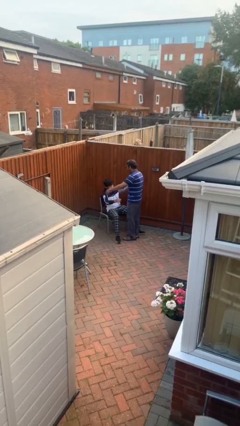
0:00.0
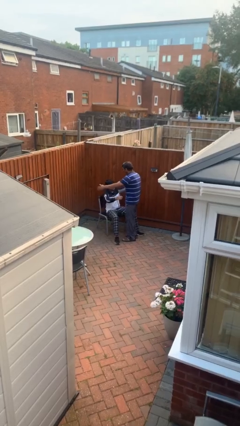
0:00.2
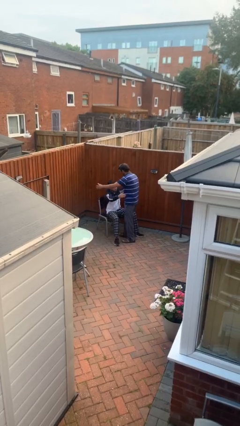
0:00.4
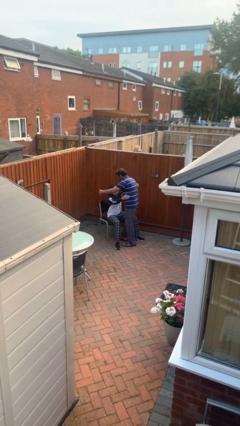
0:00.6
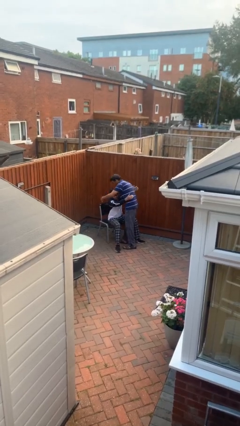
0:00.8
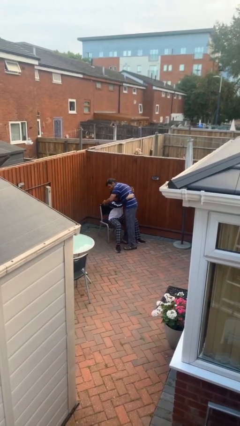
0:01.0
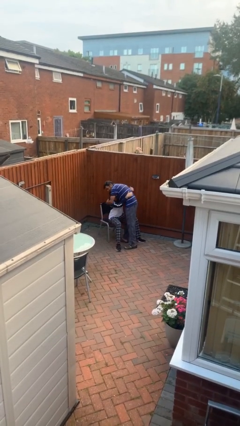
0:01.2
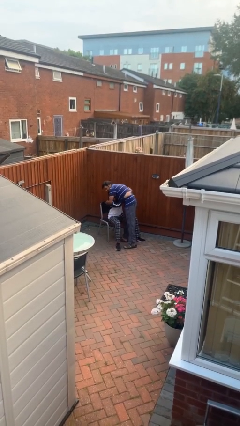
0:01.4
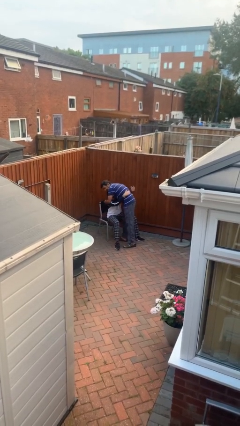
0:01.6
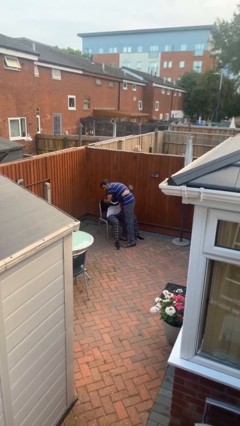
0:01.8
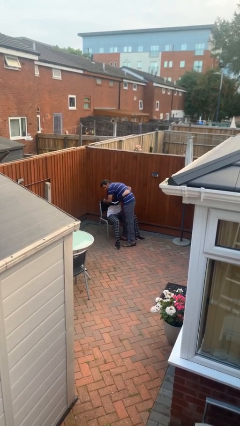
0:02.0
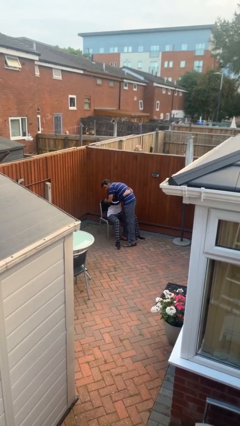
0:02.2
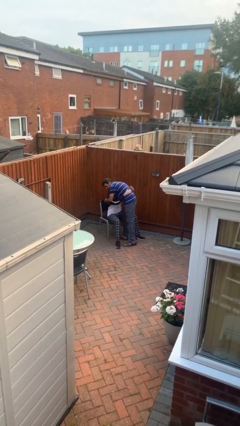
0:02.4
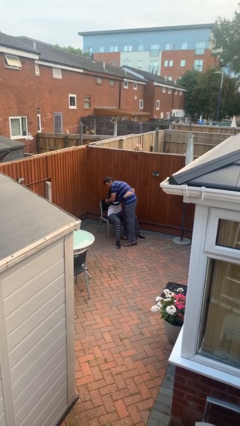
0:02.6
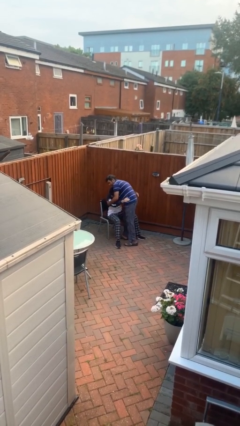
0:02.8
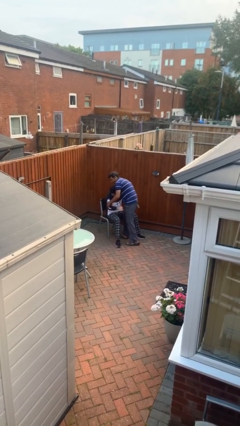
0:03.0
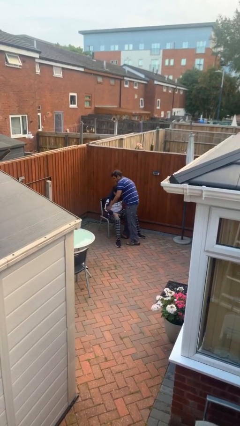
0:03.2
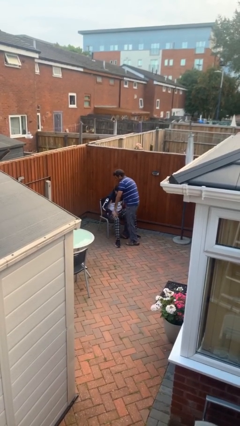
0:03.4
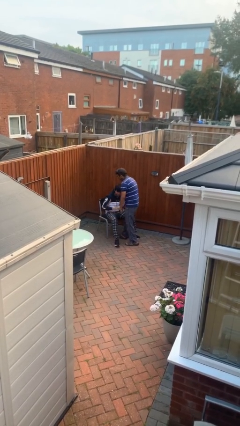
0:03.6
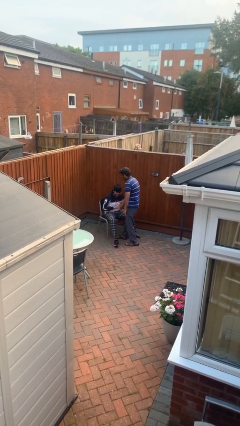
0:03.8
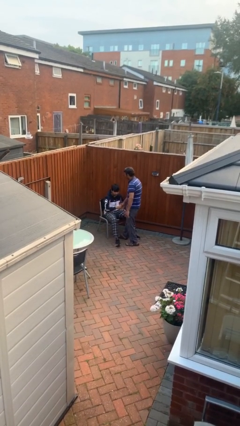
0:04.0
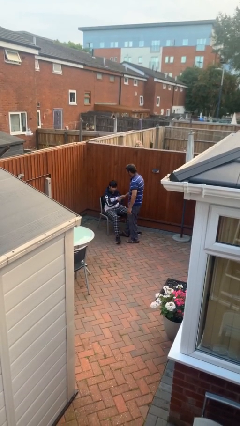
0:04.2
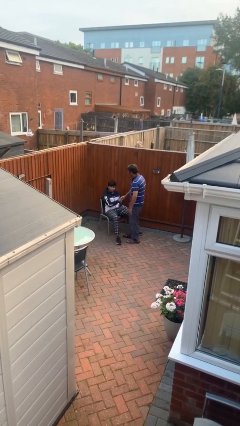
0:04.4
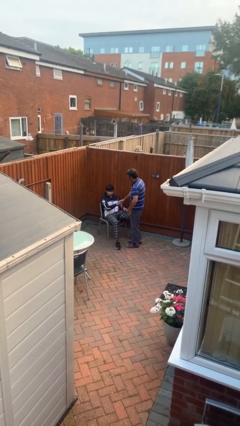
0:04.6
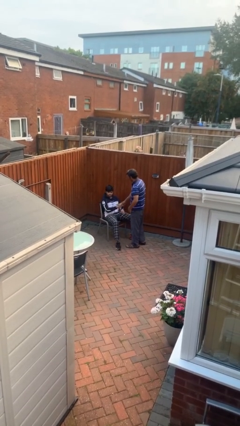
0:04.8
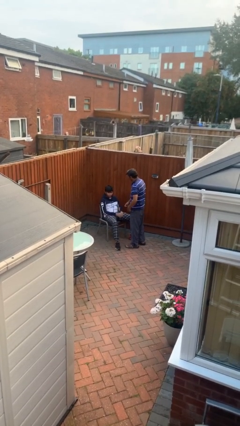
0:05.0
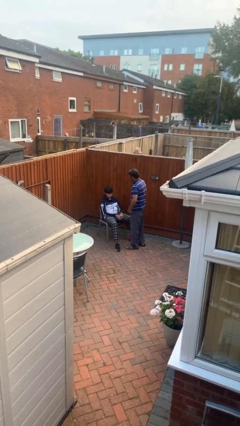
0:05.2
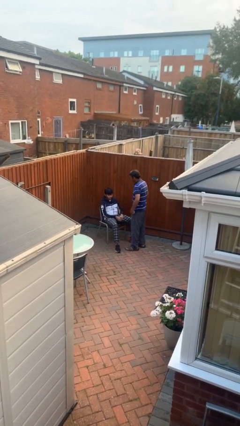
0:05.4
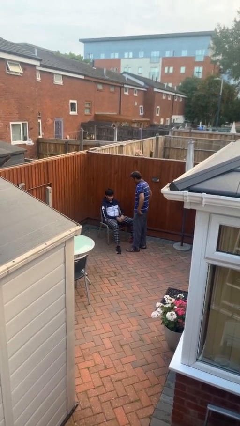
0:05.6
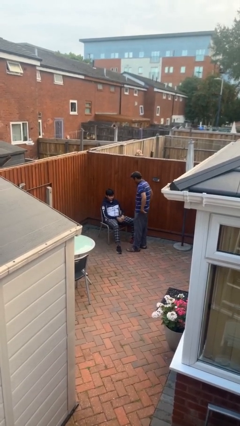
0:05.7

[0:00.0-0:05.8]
person embraces person

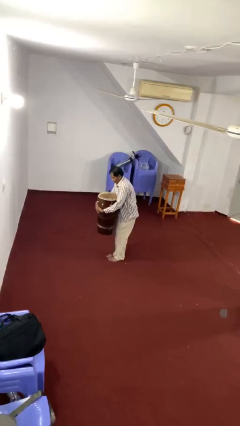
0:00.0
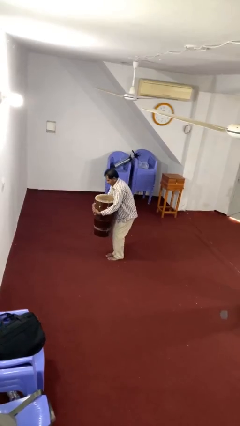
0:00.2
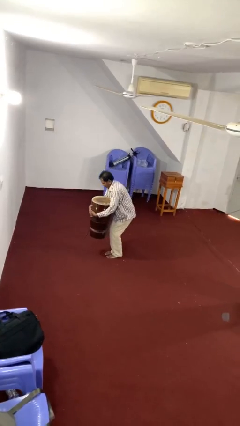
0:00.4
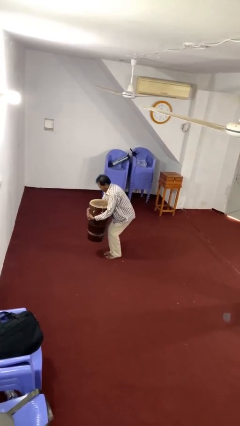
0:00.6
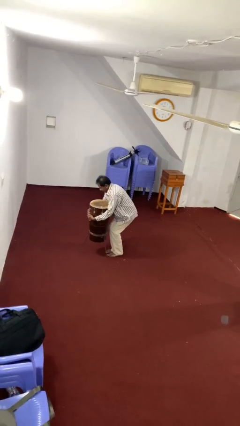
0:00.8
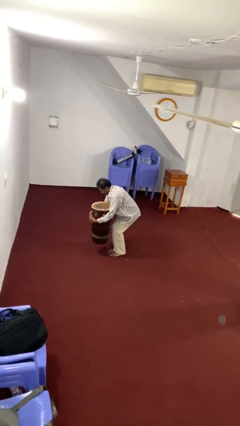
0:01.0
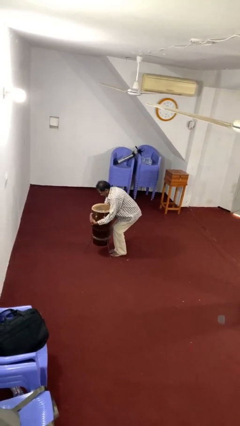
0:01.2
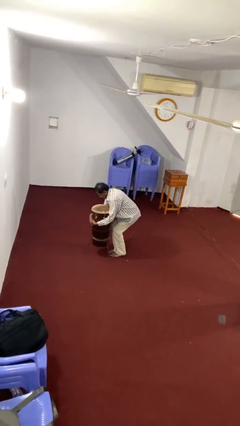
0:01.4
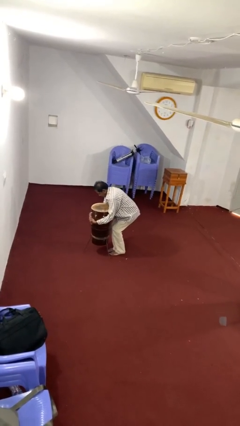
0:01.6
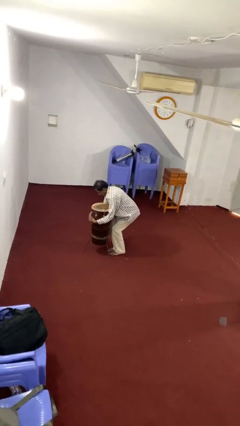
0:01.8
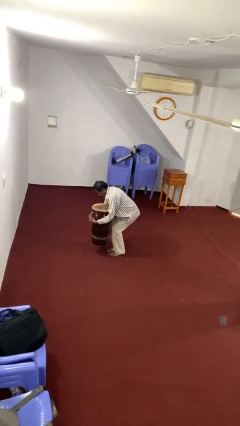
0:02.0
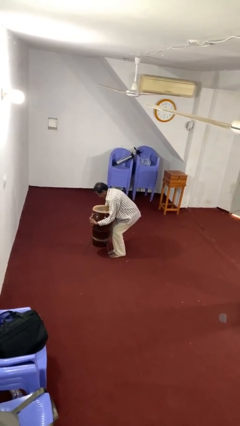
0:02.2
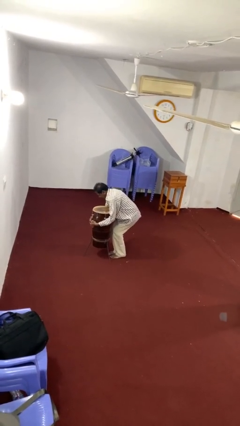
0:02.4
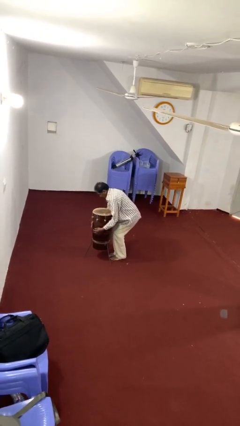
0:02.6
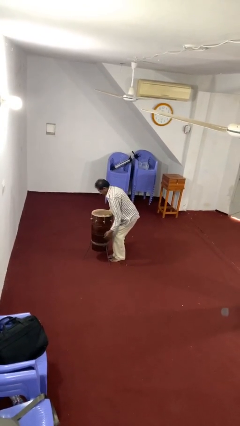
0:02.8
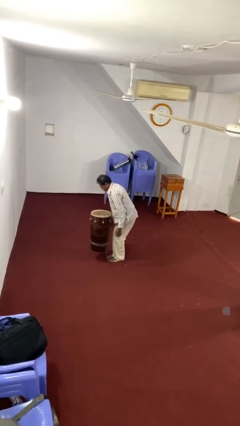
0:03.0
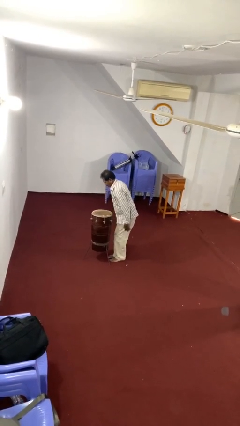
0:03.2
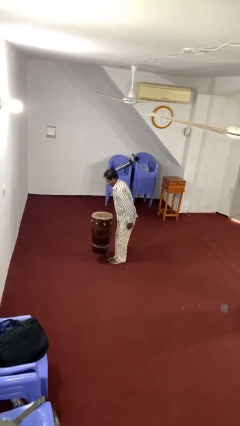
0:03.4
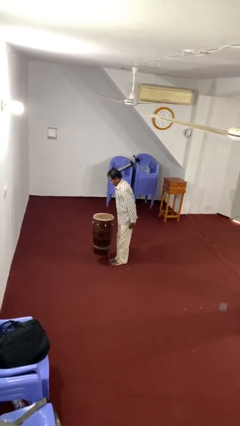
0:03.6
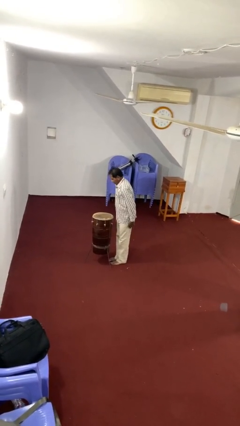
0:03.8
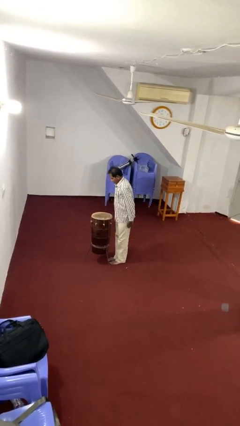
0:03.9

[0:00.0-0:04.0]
person puts down object on floor

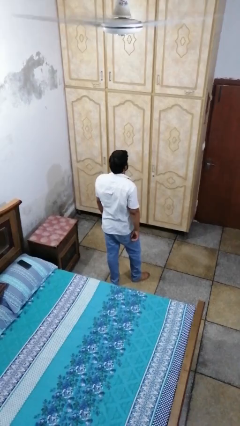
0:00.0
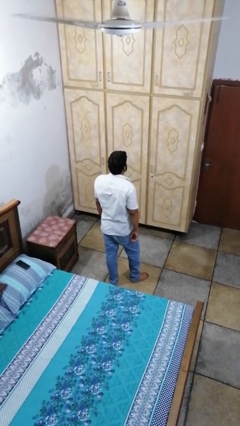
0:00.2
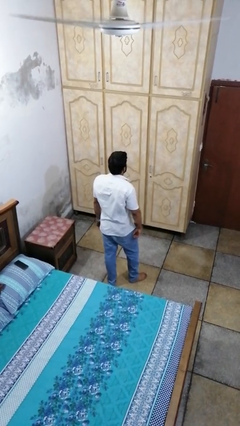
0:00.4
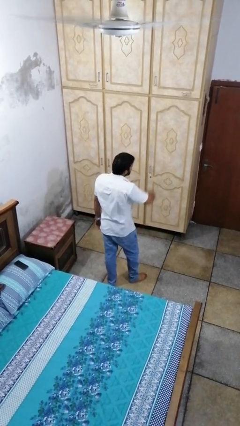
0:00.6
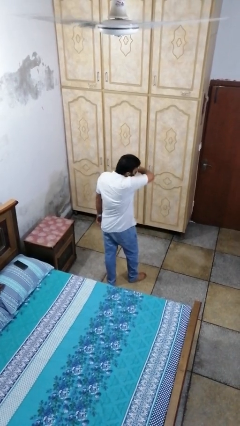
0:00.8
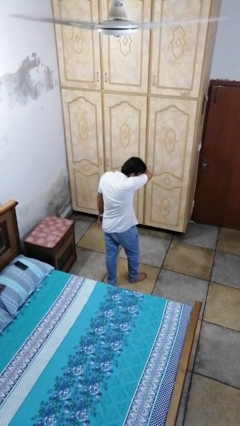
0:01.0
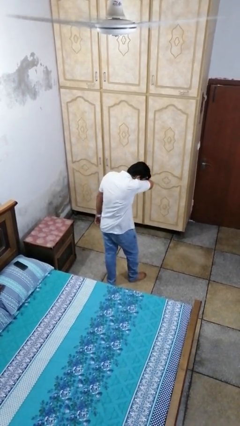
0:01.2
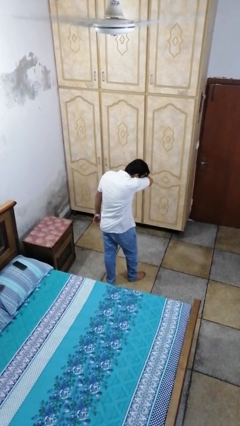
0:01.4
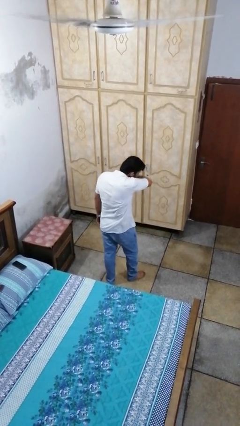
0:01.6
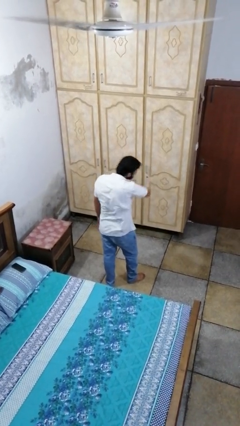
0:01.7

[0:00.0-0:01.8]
person sneezes into arm

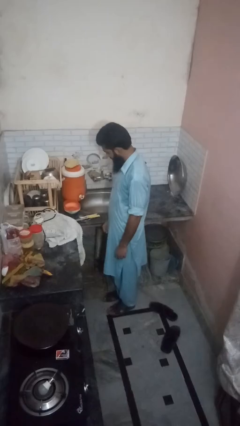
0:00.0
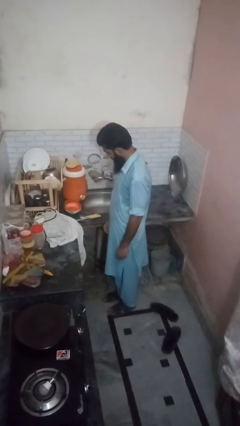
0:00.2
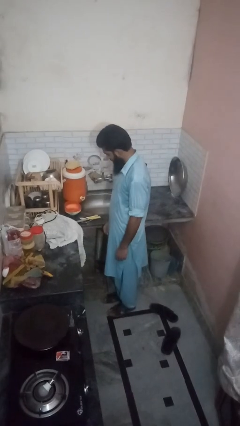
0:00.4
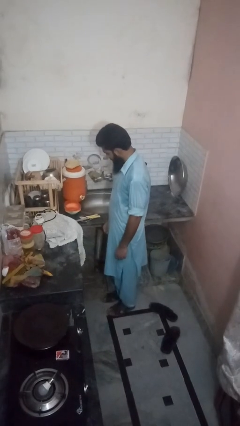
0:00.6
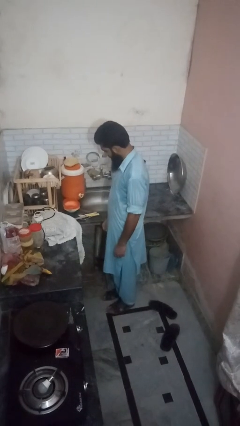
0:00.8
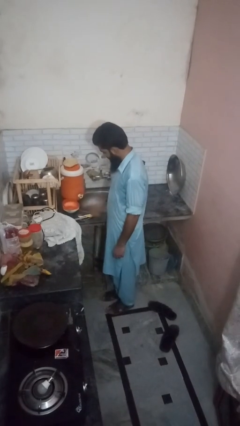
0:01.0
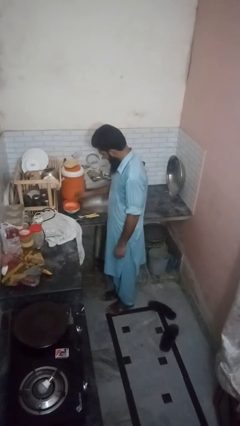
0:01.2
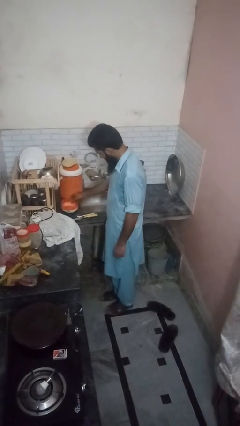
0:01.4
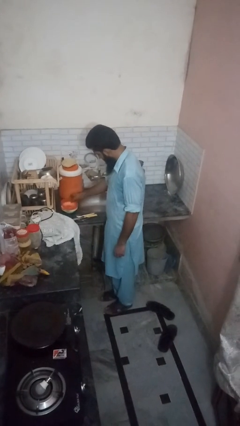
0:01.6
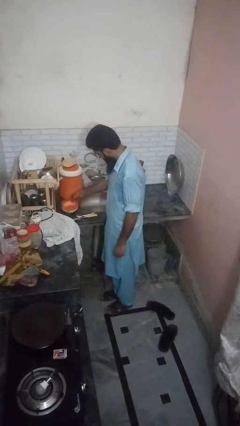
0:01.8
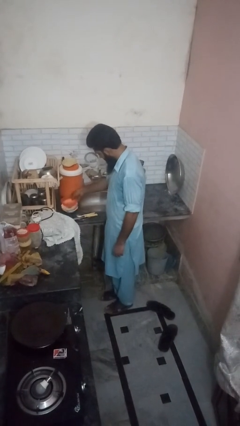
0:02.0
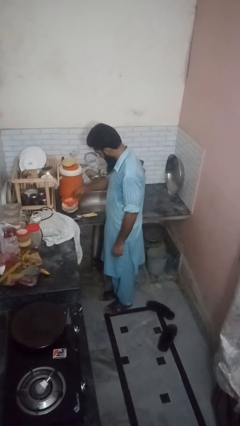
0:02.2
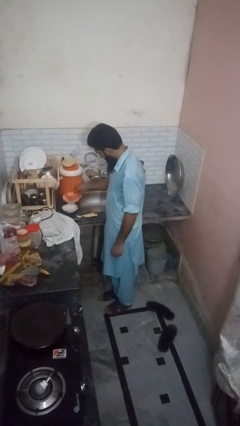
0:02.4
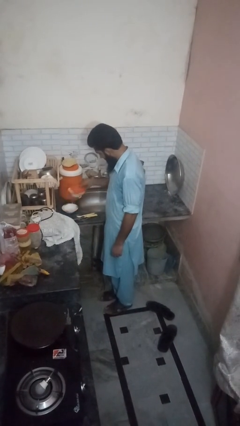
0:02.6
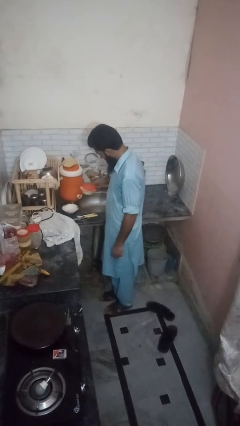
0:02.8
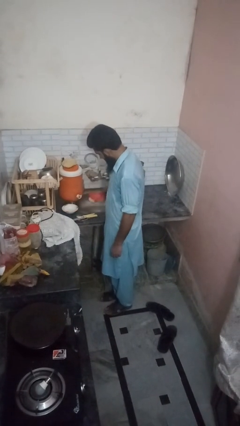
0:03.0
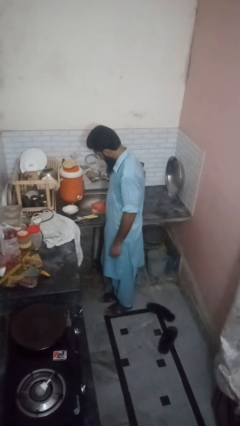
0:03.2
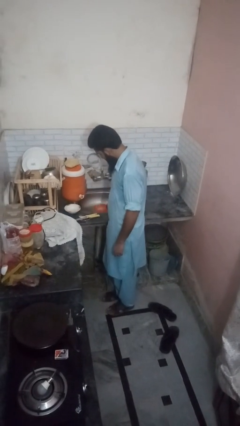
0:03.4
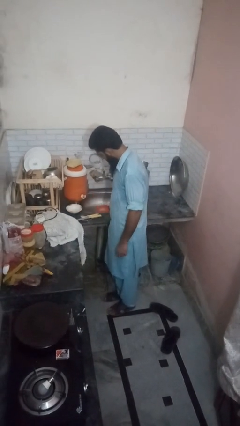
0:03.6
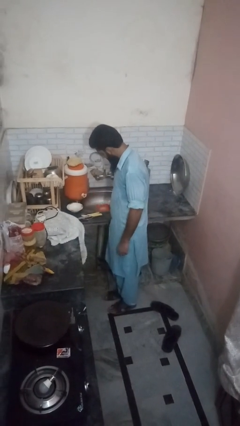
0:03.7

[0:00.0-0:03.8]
person loads dishwasher

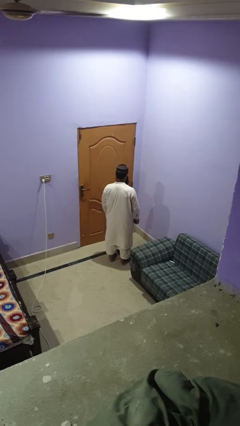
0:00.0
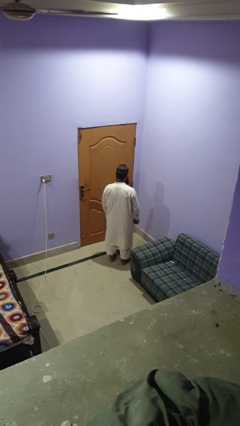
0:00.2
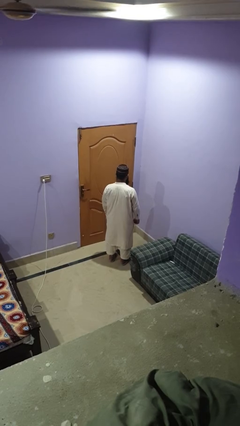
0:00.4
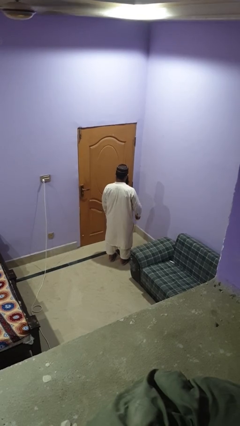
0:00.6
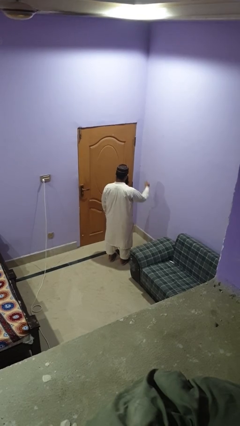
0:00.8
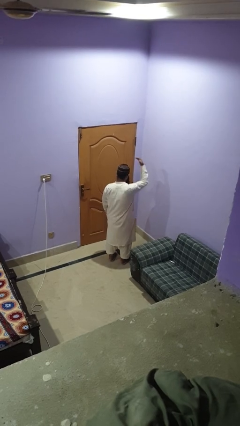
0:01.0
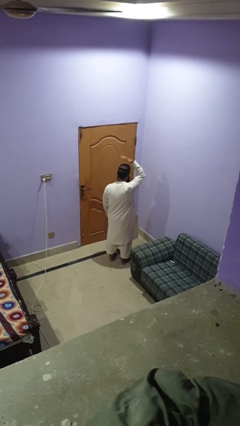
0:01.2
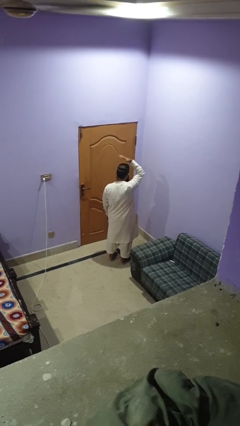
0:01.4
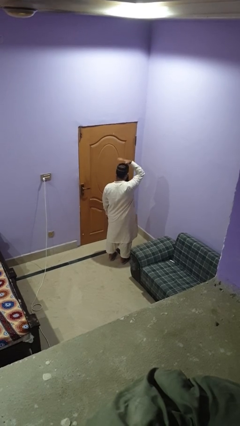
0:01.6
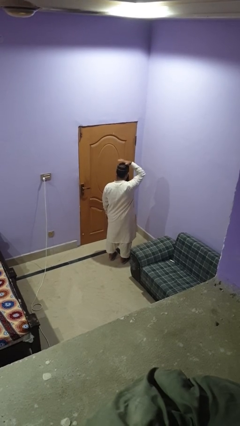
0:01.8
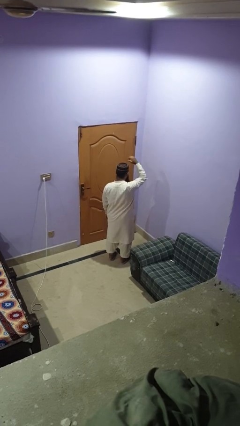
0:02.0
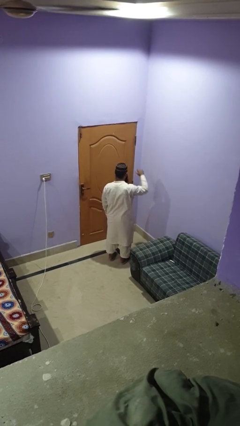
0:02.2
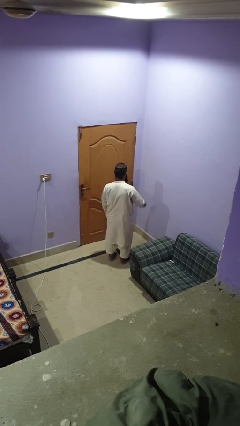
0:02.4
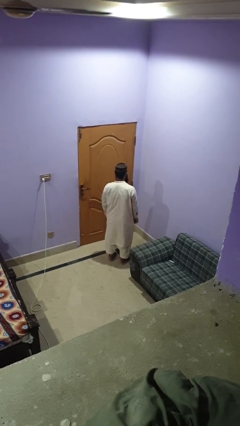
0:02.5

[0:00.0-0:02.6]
person pats head
